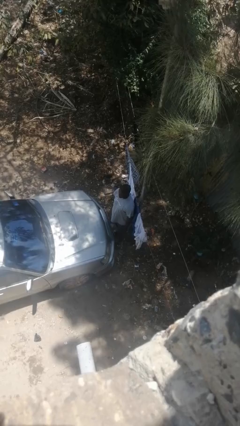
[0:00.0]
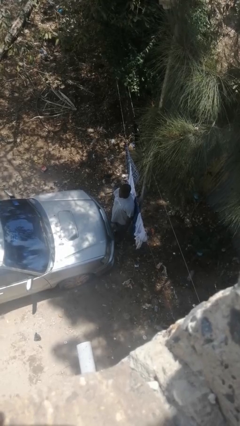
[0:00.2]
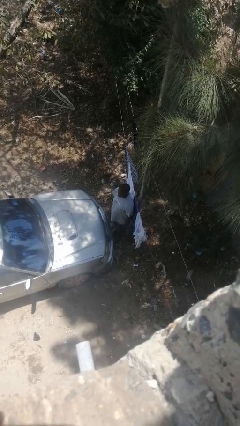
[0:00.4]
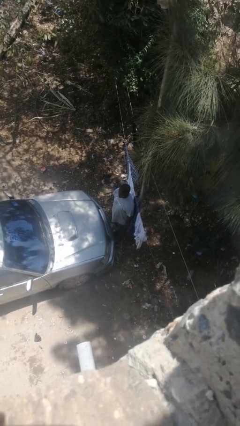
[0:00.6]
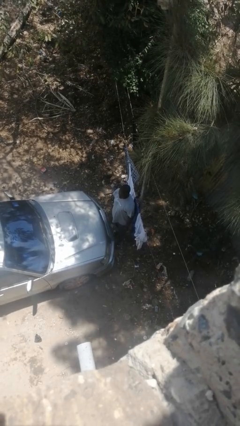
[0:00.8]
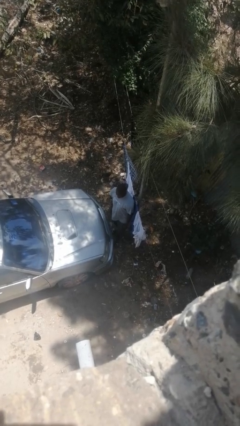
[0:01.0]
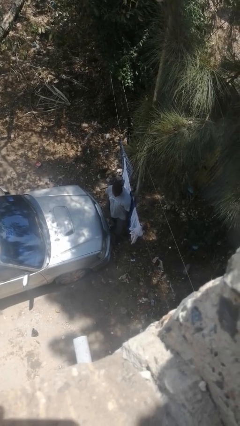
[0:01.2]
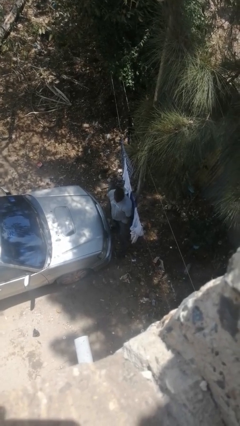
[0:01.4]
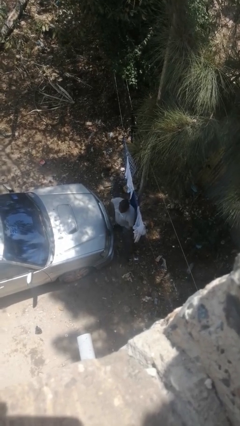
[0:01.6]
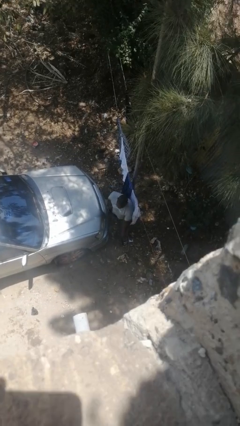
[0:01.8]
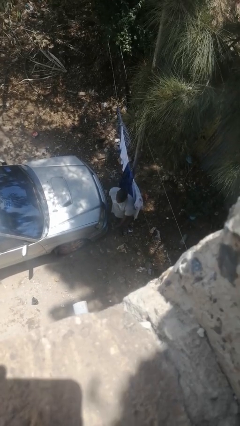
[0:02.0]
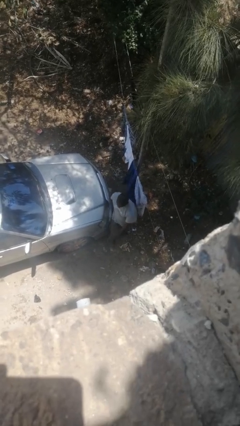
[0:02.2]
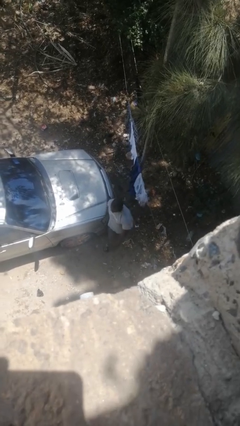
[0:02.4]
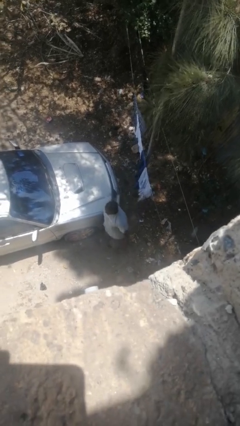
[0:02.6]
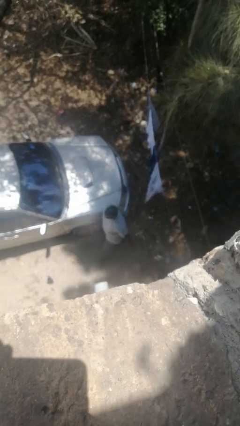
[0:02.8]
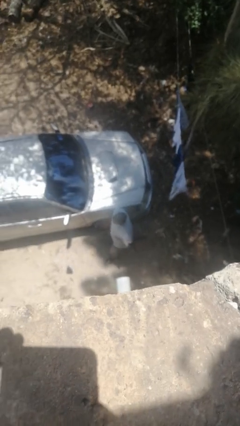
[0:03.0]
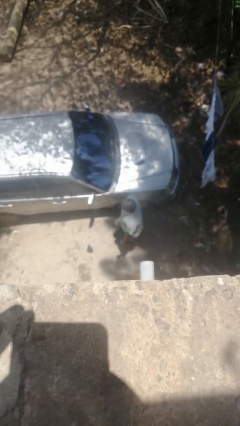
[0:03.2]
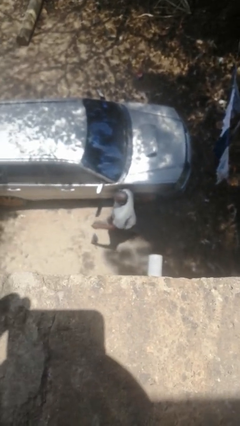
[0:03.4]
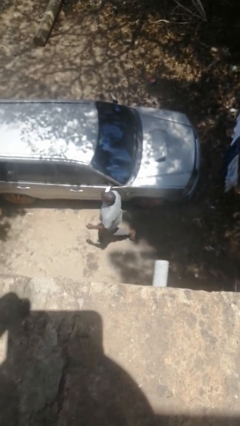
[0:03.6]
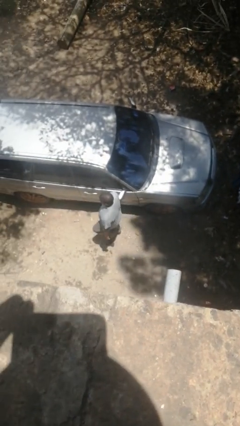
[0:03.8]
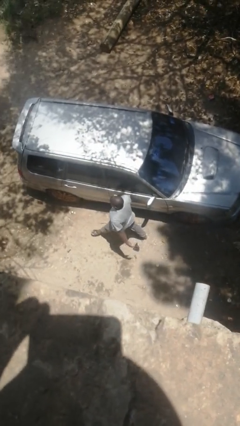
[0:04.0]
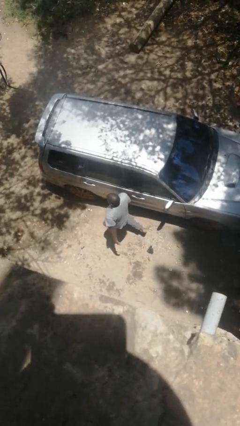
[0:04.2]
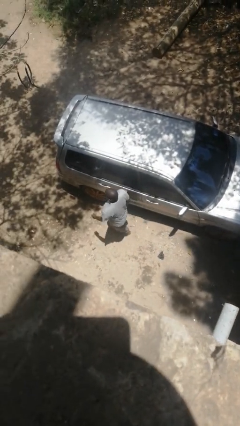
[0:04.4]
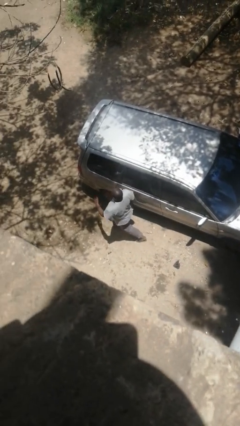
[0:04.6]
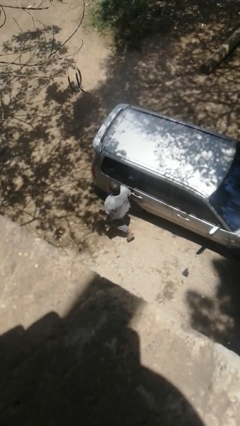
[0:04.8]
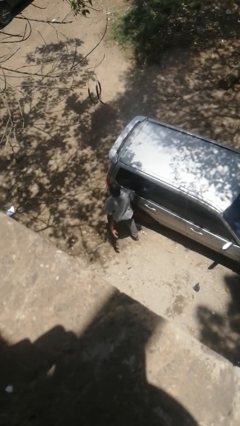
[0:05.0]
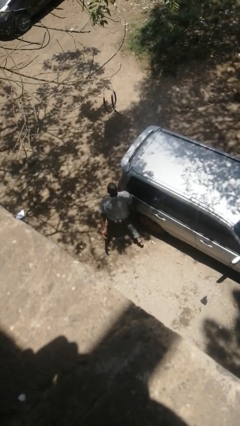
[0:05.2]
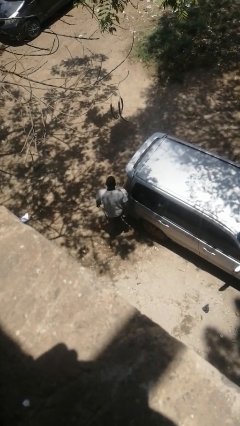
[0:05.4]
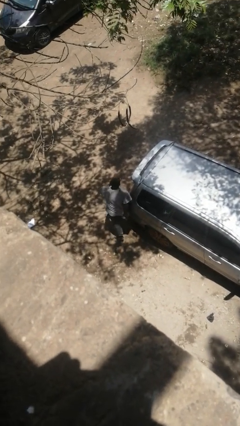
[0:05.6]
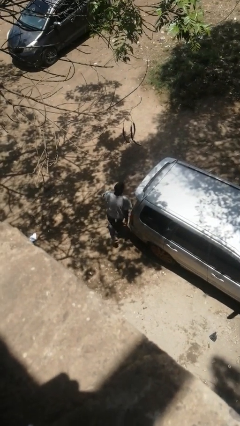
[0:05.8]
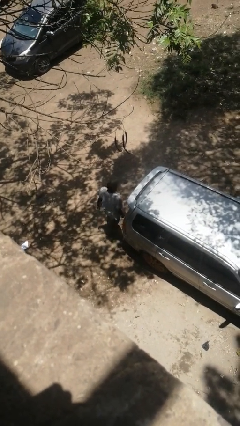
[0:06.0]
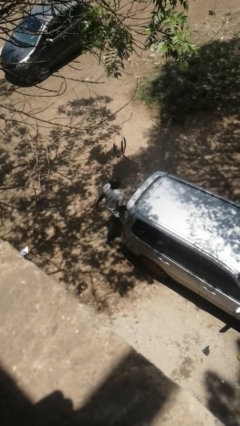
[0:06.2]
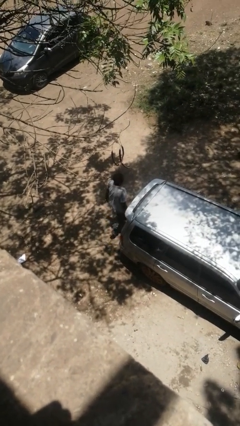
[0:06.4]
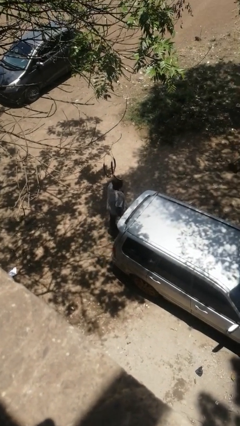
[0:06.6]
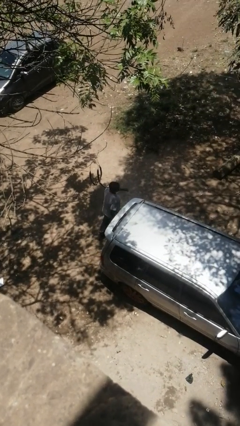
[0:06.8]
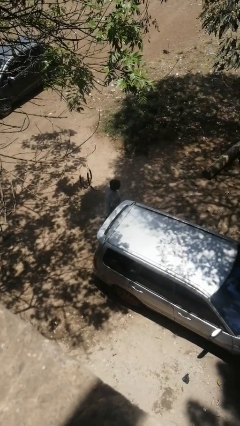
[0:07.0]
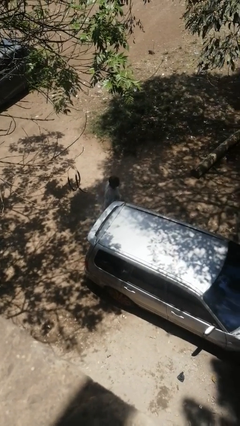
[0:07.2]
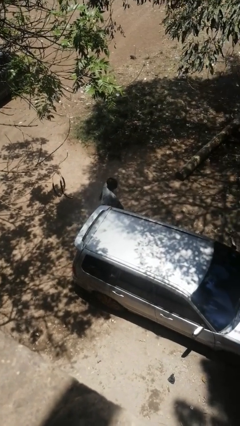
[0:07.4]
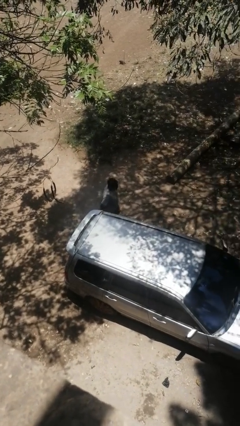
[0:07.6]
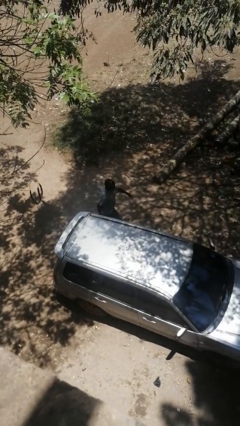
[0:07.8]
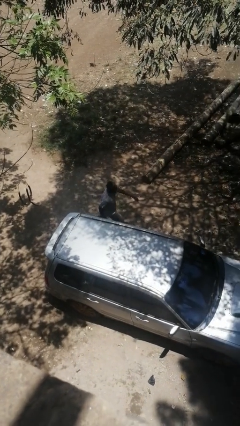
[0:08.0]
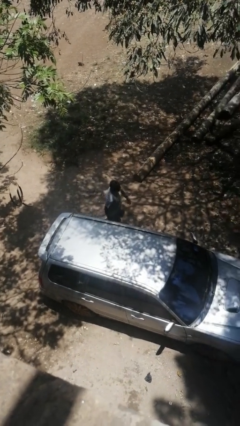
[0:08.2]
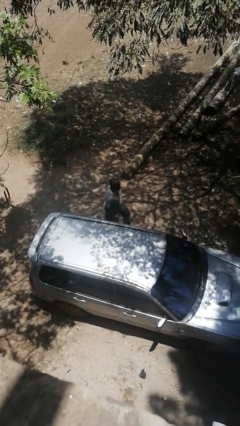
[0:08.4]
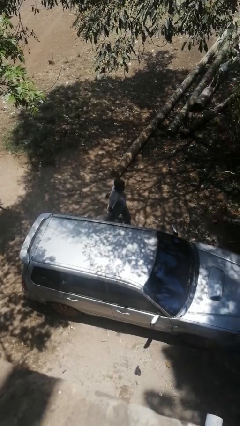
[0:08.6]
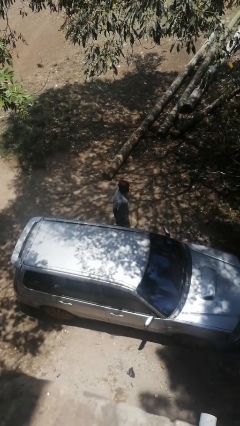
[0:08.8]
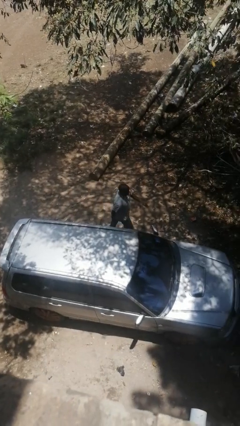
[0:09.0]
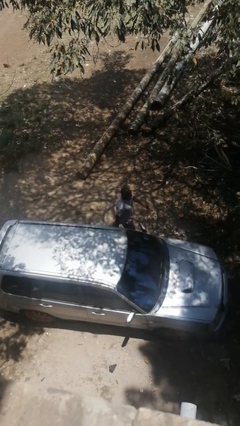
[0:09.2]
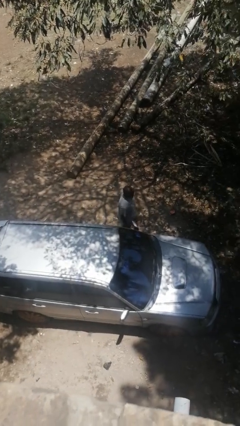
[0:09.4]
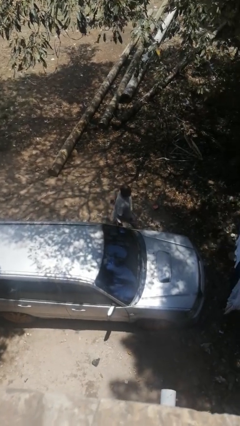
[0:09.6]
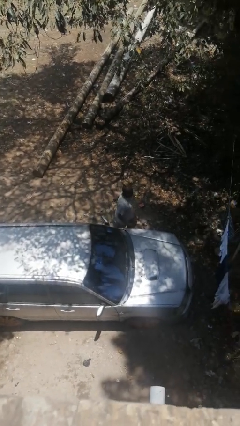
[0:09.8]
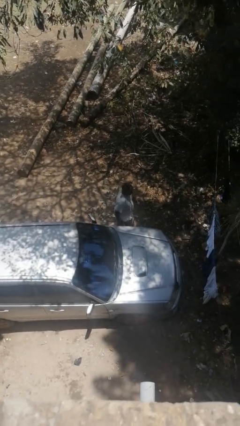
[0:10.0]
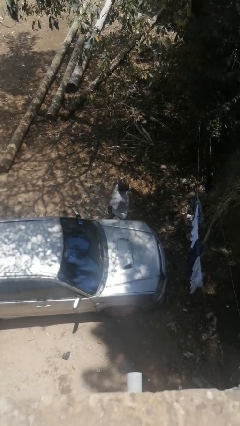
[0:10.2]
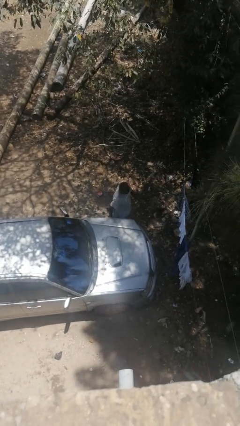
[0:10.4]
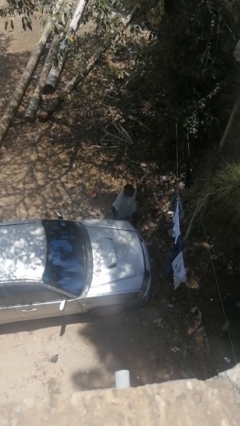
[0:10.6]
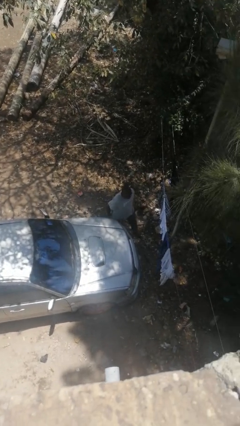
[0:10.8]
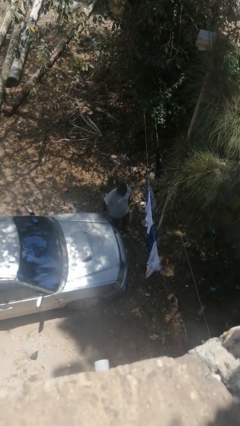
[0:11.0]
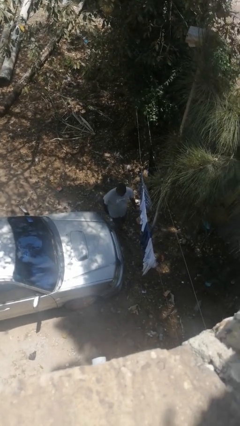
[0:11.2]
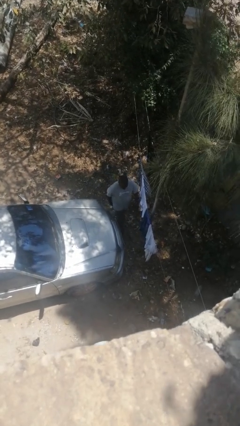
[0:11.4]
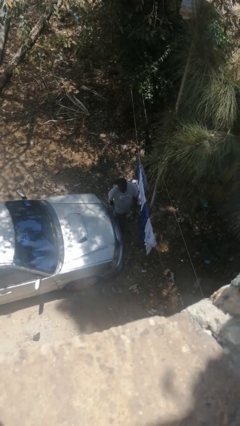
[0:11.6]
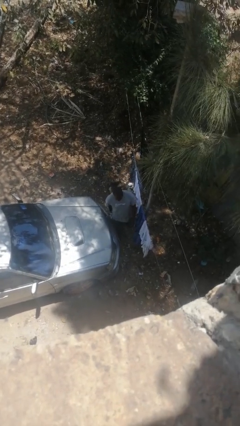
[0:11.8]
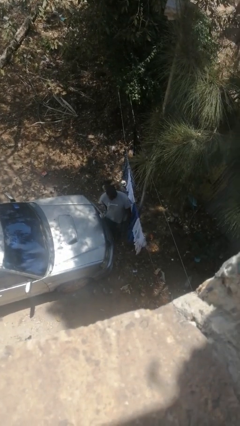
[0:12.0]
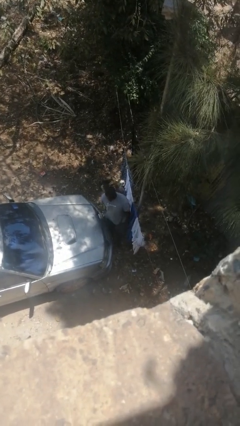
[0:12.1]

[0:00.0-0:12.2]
person walks around car

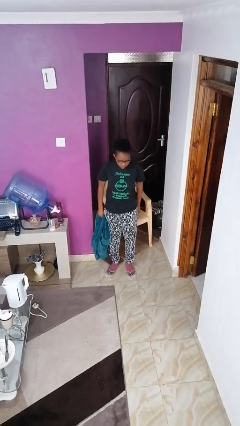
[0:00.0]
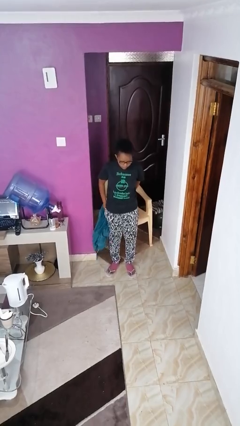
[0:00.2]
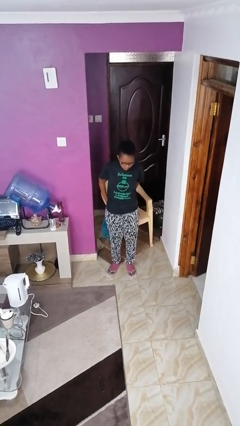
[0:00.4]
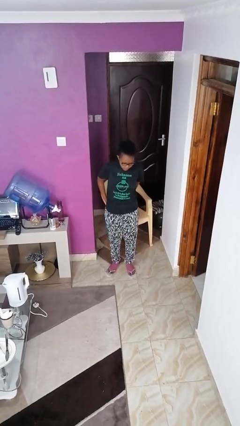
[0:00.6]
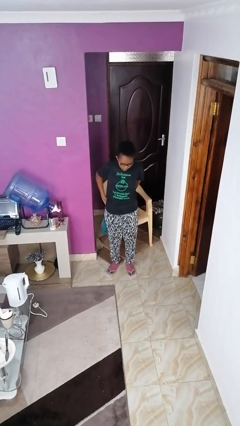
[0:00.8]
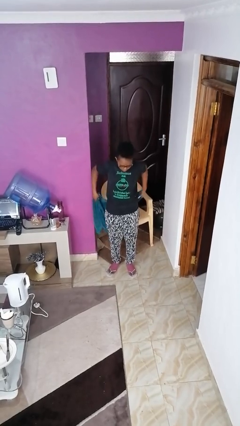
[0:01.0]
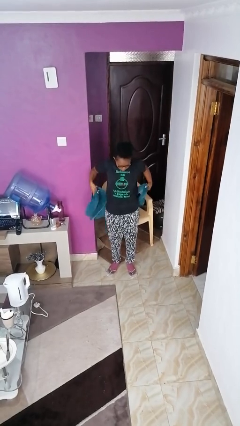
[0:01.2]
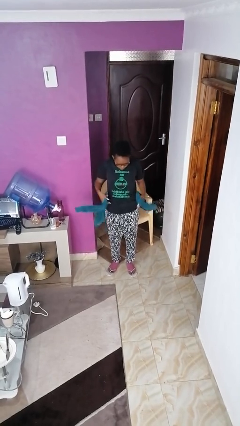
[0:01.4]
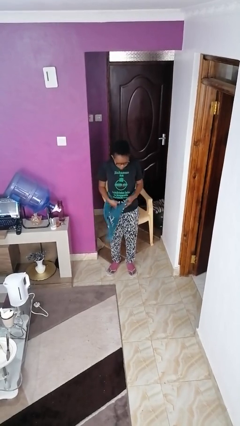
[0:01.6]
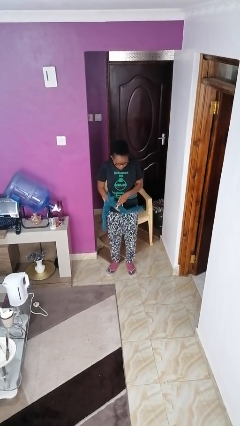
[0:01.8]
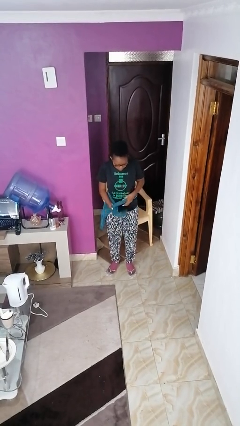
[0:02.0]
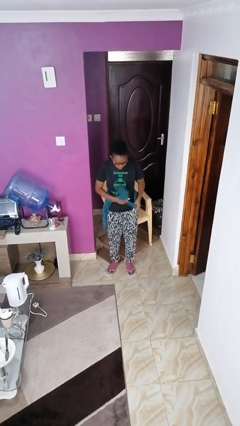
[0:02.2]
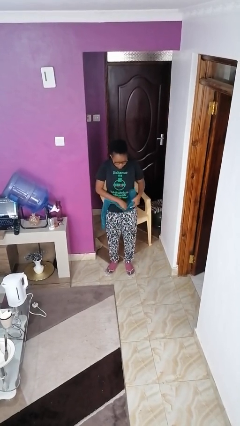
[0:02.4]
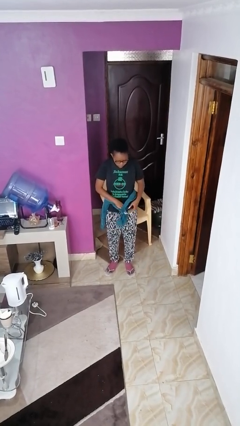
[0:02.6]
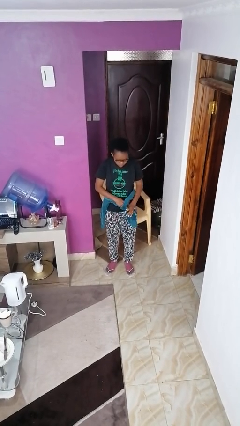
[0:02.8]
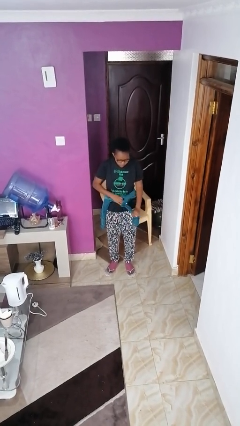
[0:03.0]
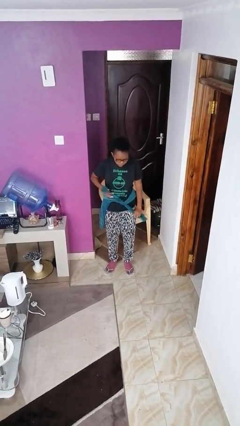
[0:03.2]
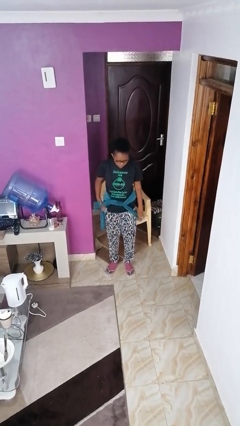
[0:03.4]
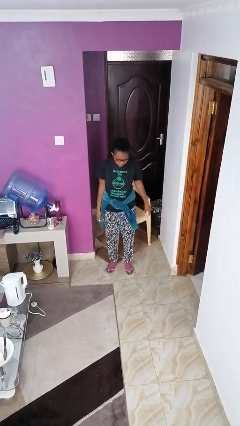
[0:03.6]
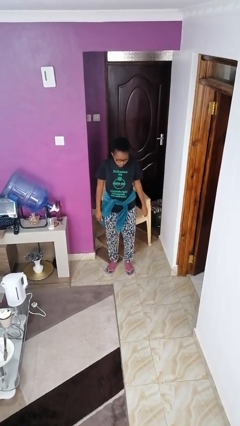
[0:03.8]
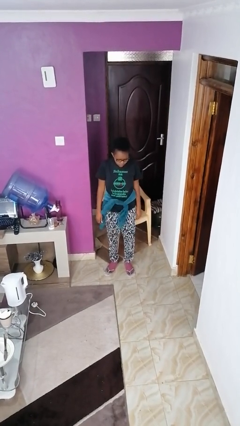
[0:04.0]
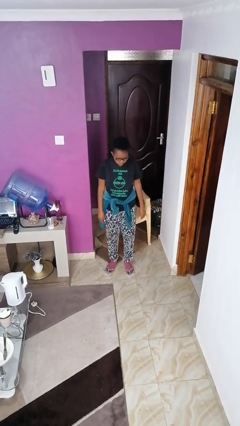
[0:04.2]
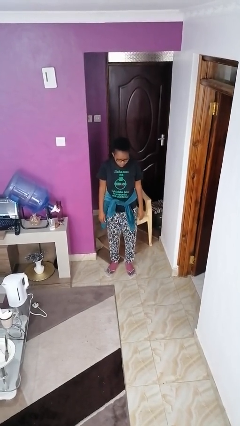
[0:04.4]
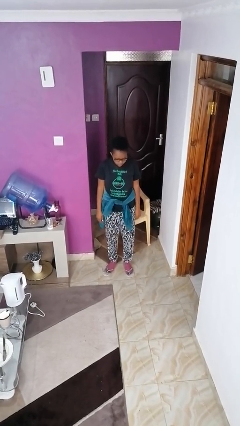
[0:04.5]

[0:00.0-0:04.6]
person ties jacket around waist

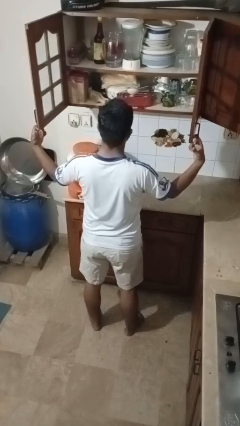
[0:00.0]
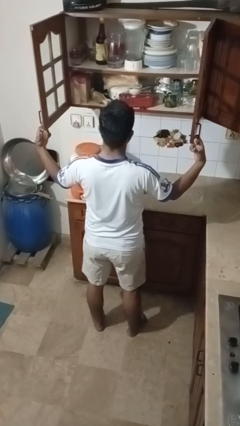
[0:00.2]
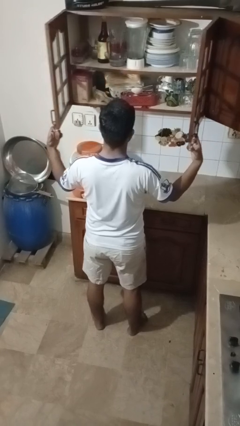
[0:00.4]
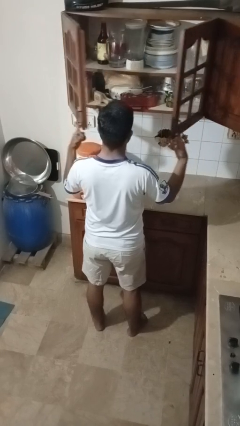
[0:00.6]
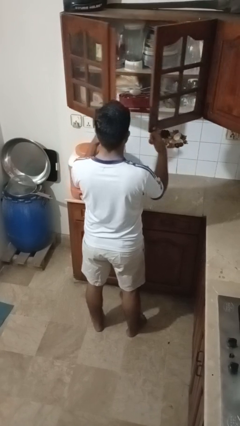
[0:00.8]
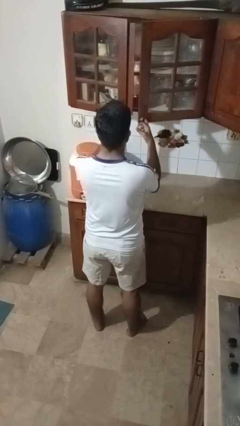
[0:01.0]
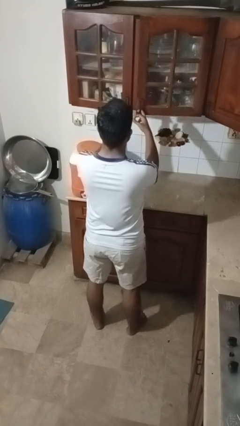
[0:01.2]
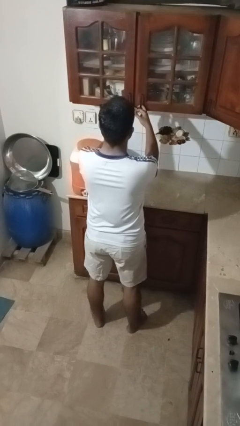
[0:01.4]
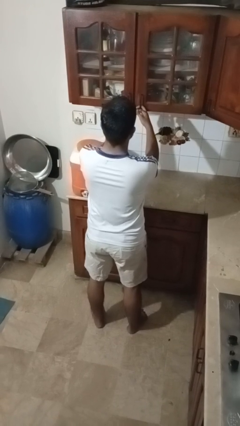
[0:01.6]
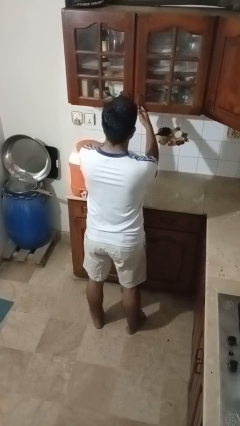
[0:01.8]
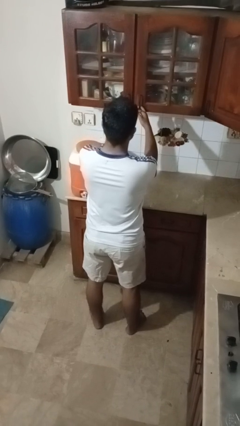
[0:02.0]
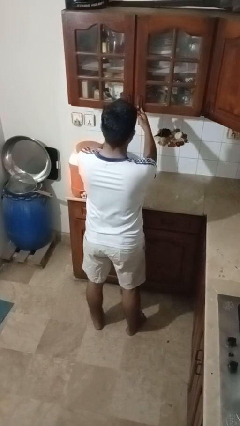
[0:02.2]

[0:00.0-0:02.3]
person closes cabinet
